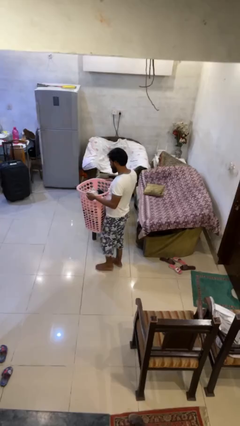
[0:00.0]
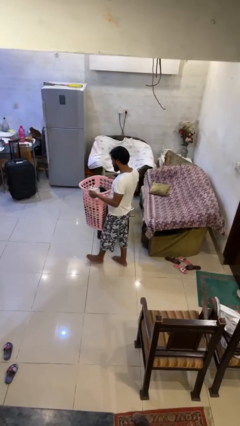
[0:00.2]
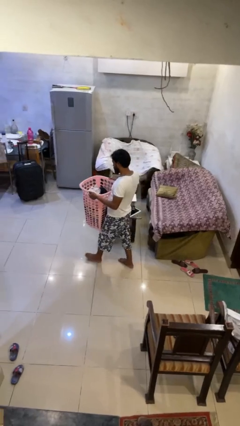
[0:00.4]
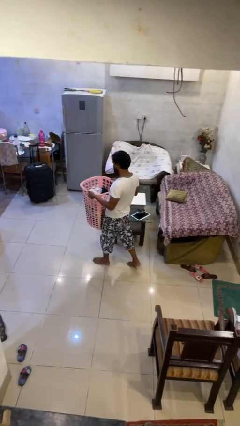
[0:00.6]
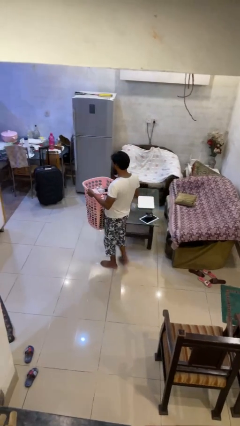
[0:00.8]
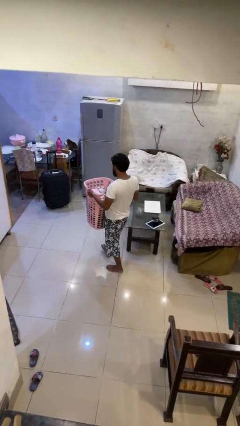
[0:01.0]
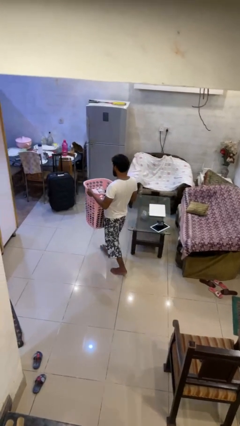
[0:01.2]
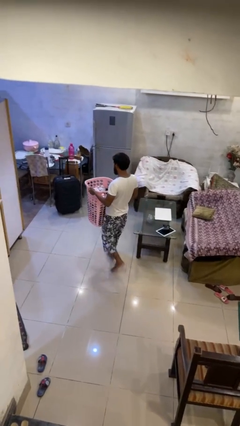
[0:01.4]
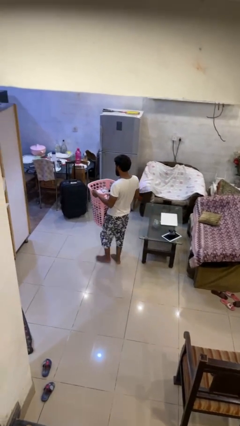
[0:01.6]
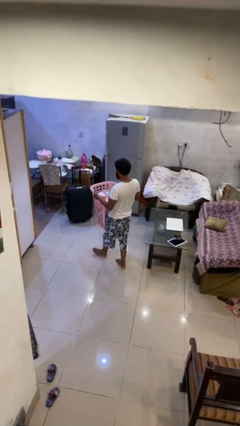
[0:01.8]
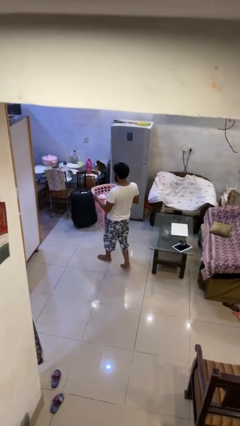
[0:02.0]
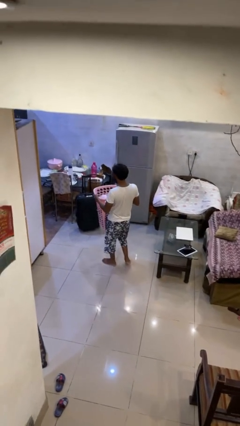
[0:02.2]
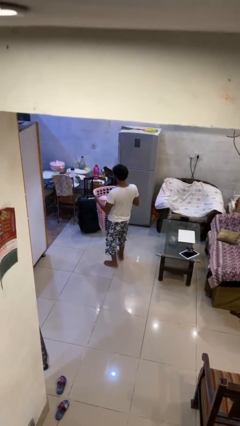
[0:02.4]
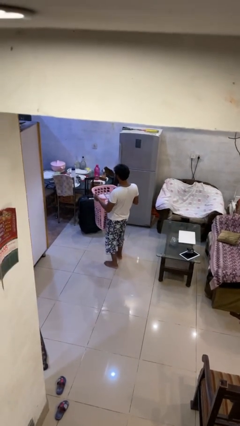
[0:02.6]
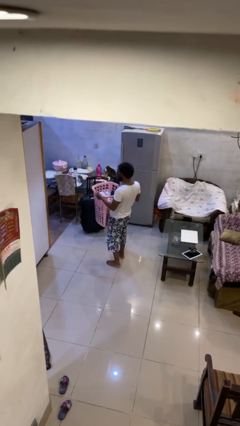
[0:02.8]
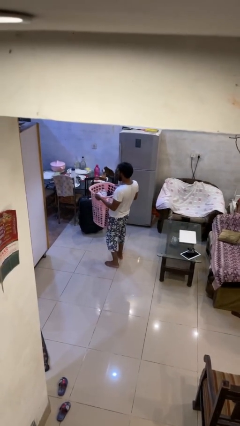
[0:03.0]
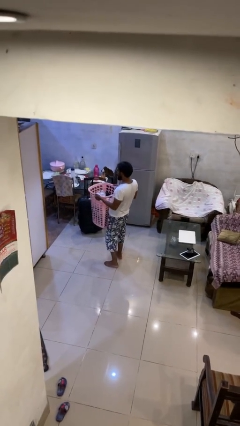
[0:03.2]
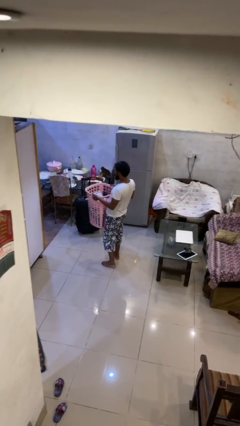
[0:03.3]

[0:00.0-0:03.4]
person carries laundry basket

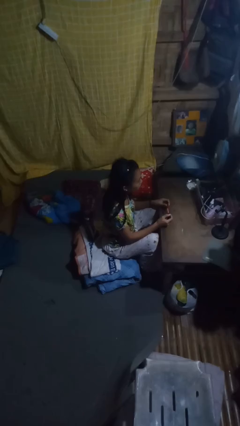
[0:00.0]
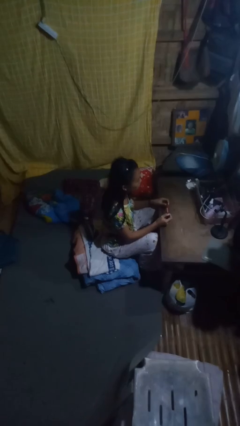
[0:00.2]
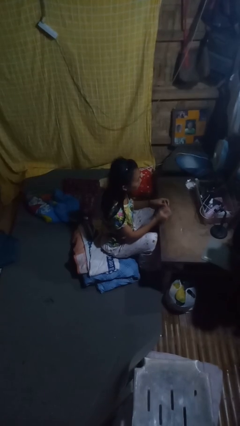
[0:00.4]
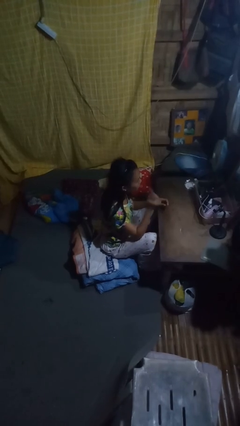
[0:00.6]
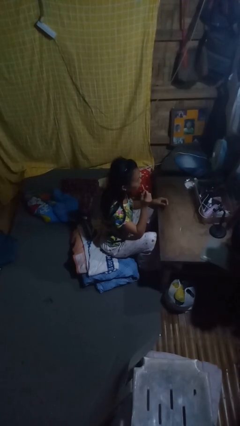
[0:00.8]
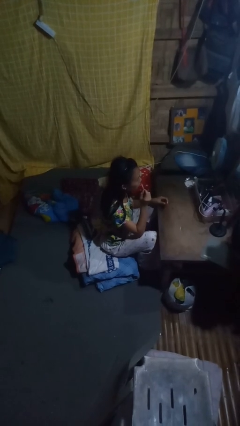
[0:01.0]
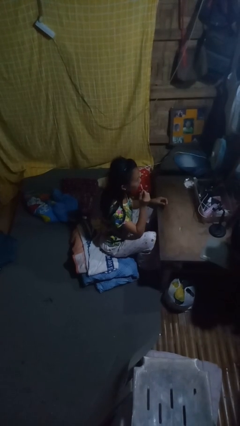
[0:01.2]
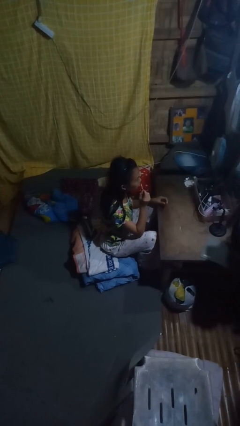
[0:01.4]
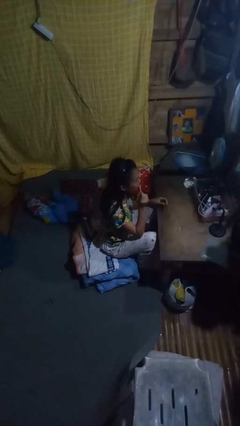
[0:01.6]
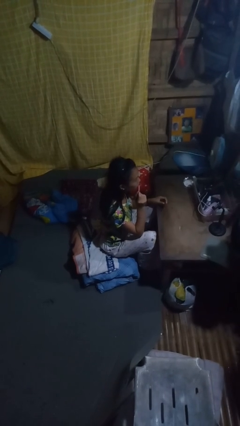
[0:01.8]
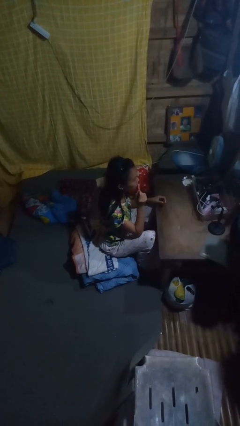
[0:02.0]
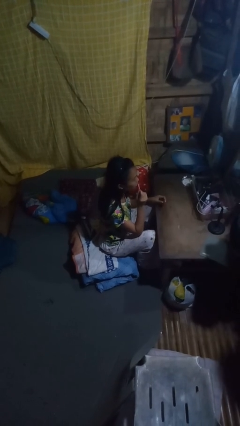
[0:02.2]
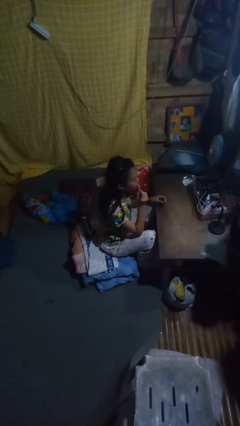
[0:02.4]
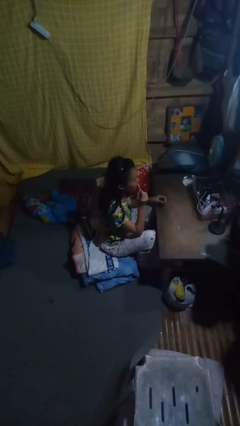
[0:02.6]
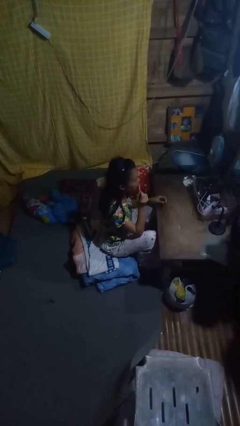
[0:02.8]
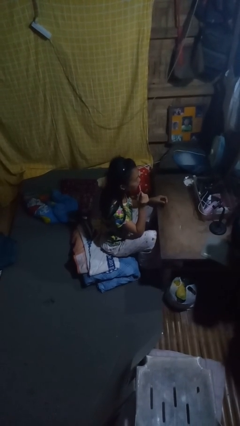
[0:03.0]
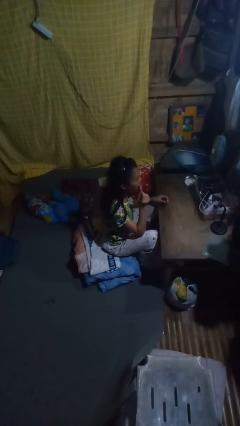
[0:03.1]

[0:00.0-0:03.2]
person applies lip makeup

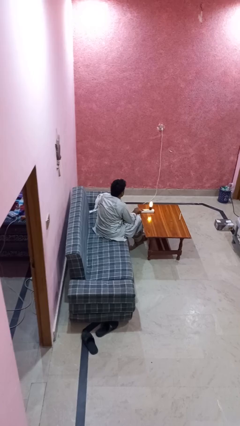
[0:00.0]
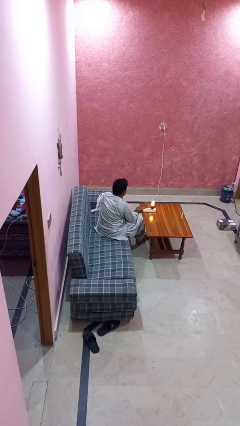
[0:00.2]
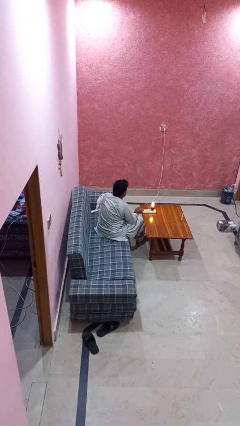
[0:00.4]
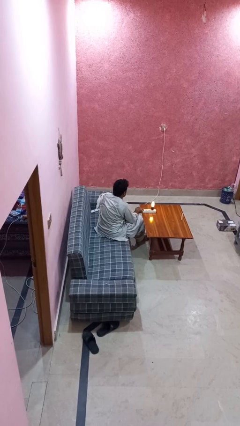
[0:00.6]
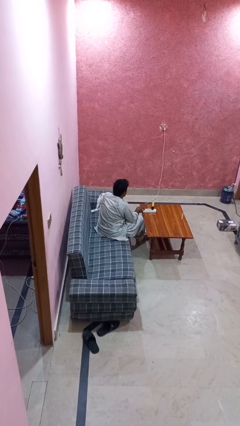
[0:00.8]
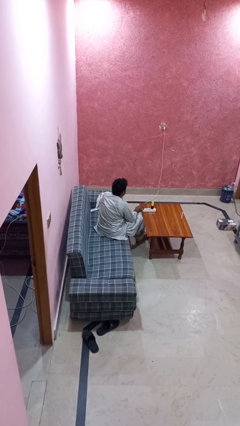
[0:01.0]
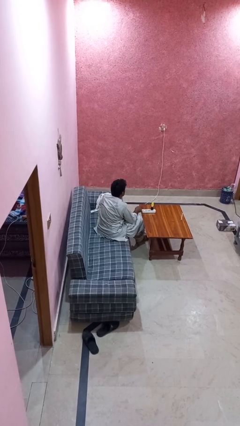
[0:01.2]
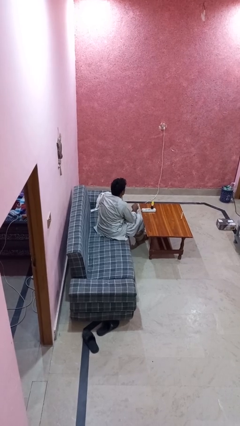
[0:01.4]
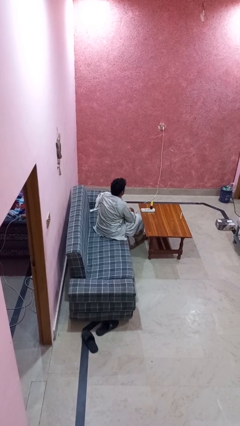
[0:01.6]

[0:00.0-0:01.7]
person turns off lamp

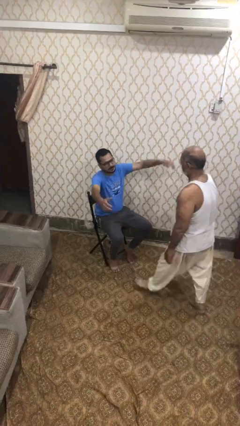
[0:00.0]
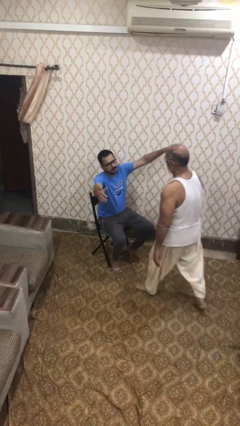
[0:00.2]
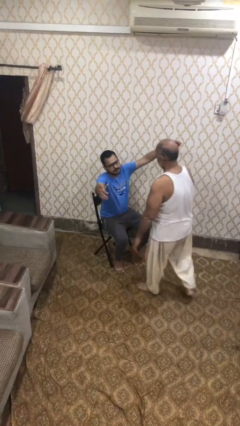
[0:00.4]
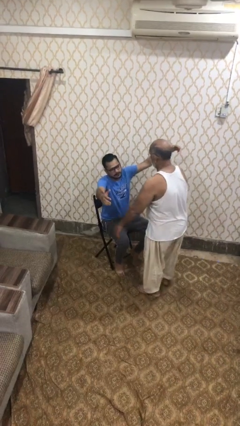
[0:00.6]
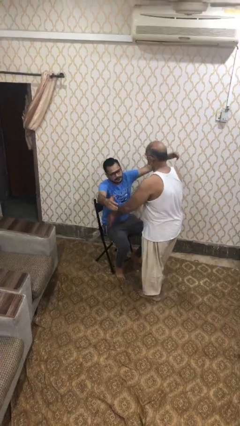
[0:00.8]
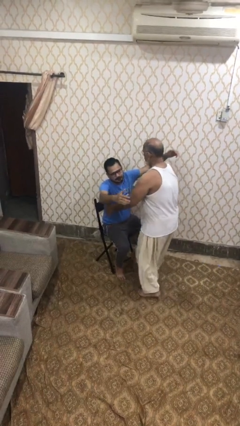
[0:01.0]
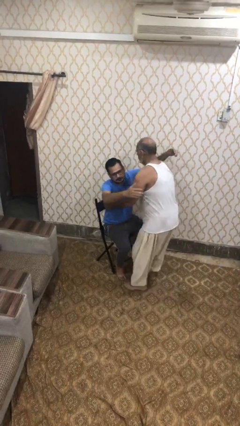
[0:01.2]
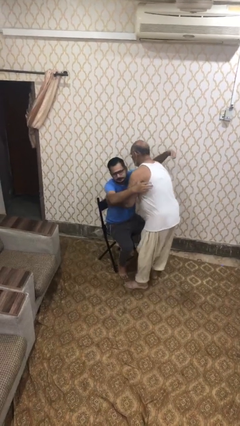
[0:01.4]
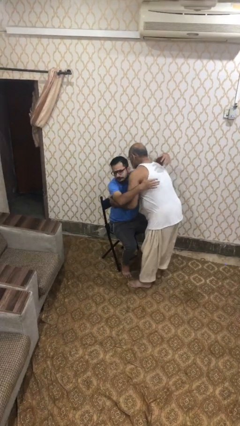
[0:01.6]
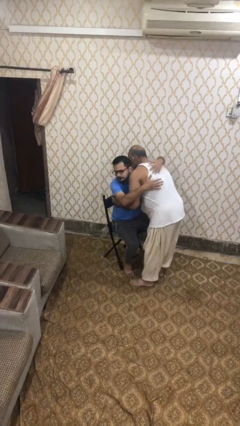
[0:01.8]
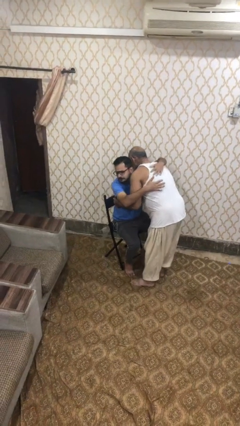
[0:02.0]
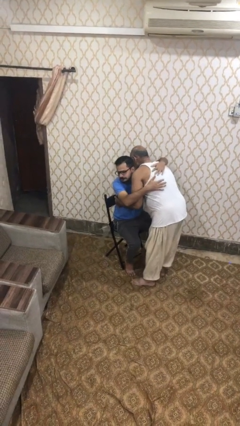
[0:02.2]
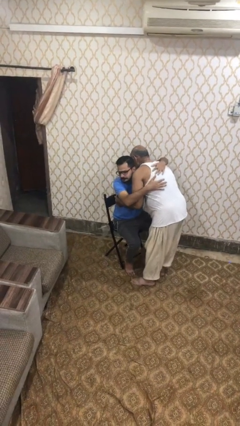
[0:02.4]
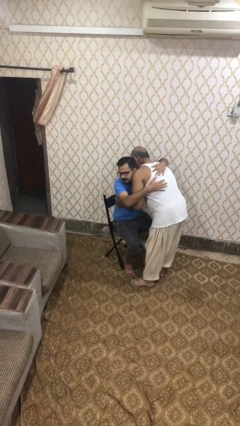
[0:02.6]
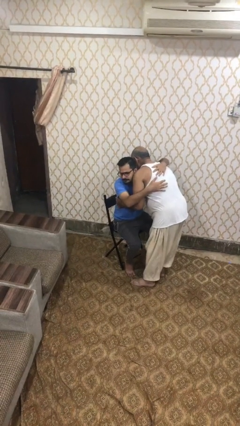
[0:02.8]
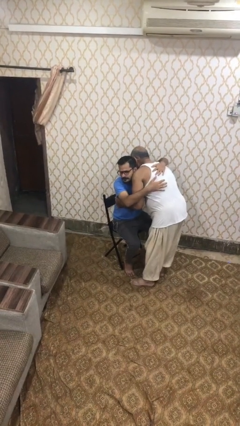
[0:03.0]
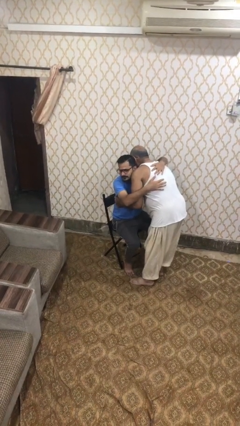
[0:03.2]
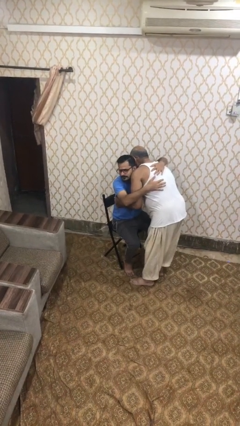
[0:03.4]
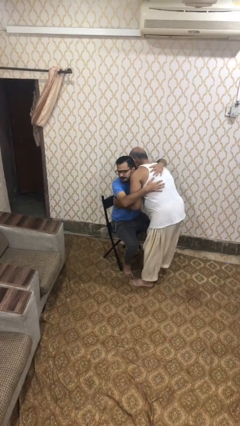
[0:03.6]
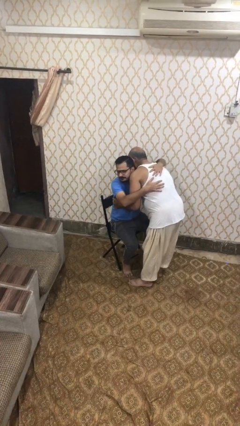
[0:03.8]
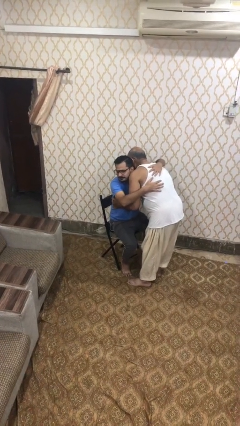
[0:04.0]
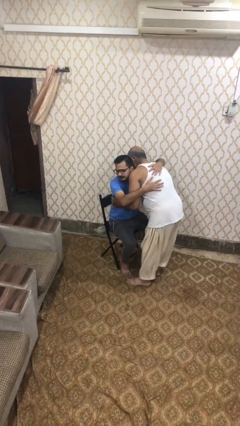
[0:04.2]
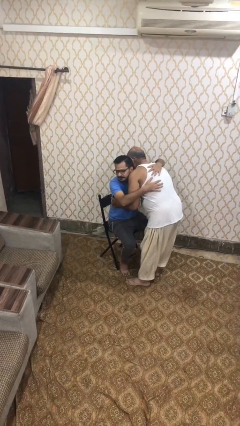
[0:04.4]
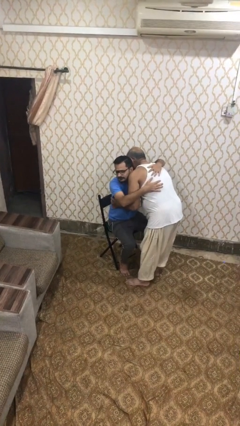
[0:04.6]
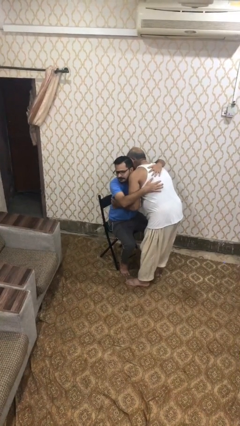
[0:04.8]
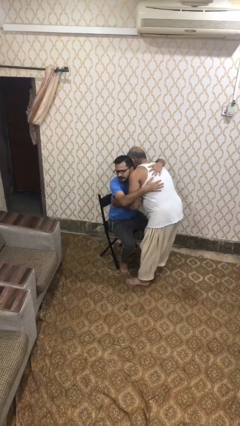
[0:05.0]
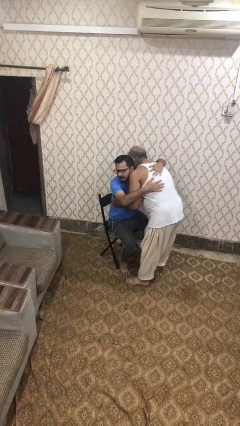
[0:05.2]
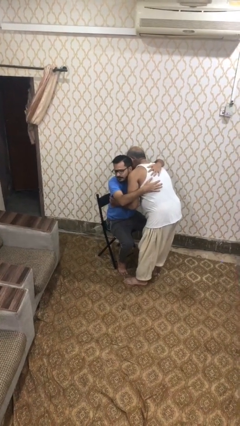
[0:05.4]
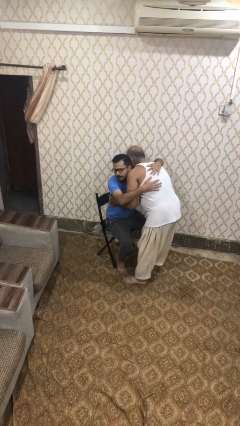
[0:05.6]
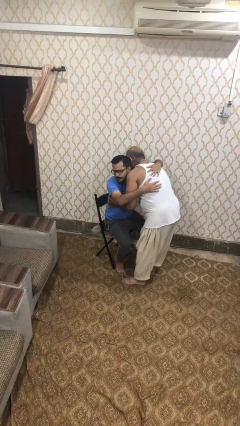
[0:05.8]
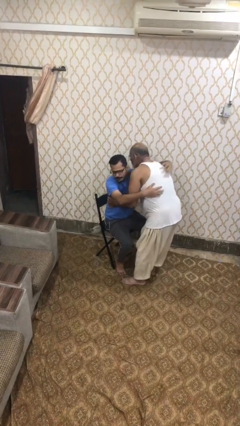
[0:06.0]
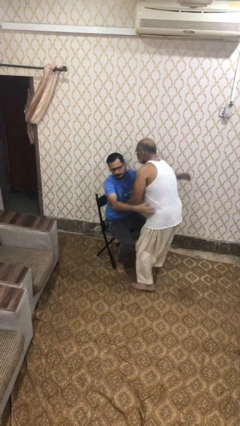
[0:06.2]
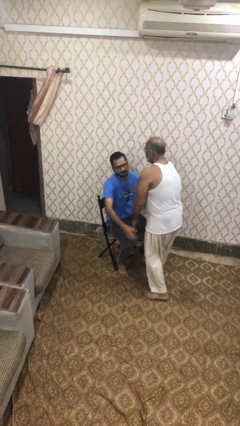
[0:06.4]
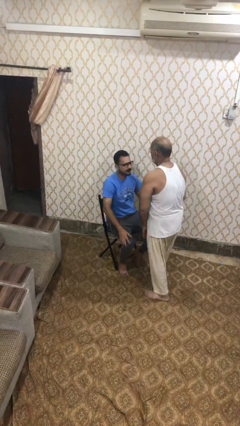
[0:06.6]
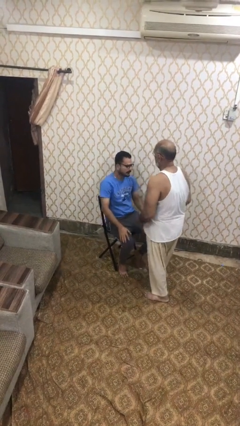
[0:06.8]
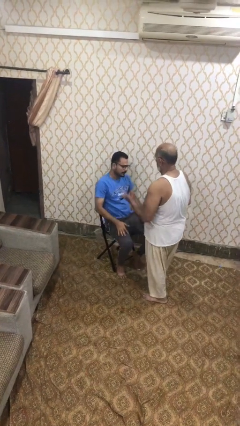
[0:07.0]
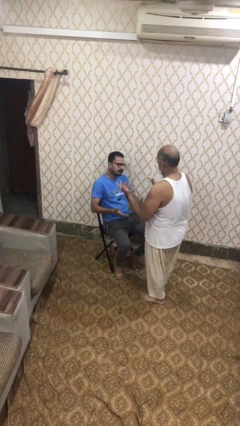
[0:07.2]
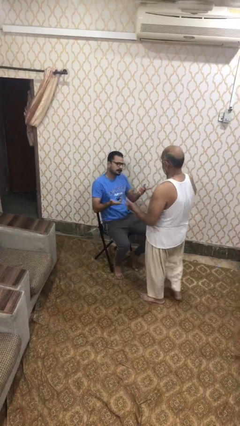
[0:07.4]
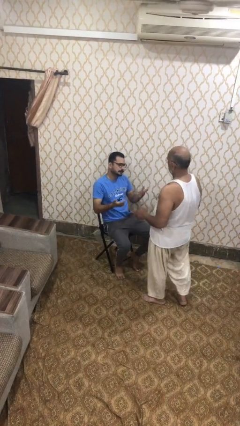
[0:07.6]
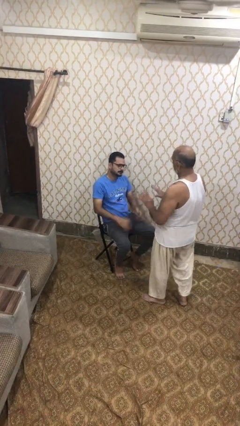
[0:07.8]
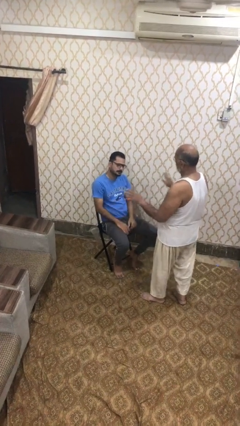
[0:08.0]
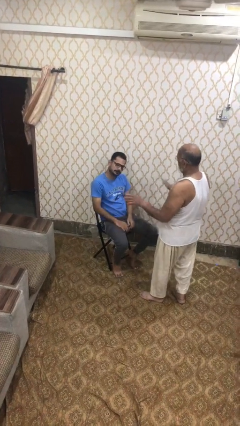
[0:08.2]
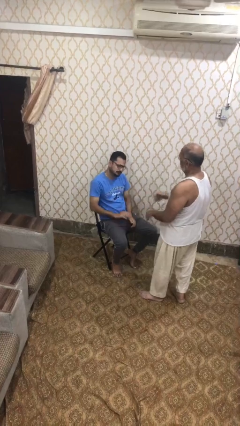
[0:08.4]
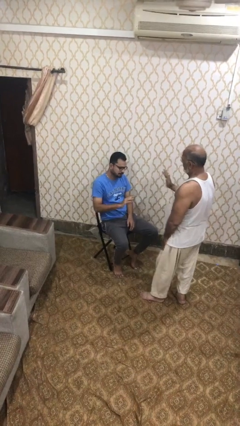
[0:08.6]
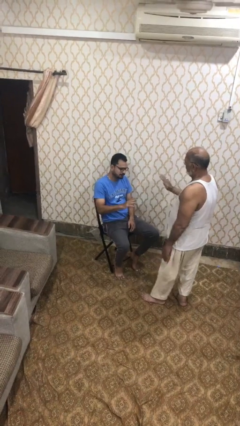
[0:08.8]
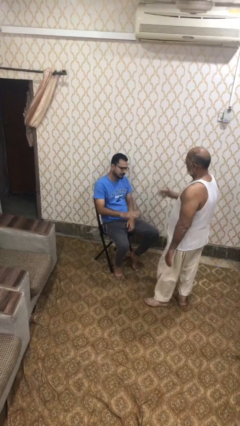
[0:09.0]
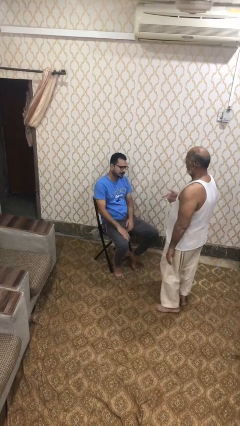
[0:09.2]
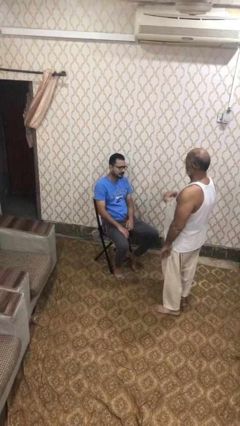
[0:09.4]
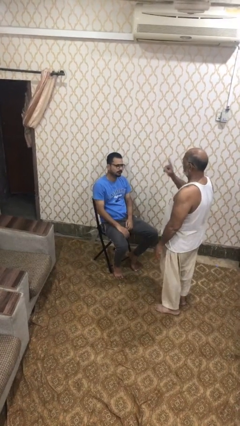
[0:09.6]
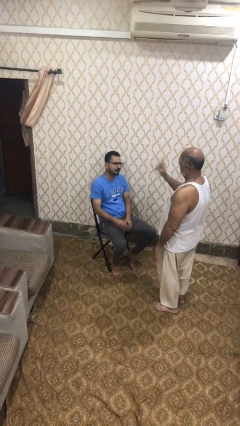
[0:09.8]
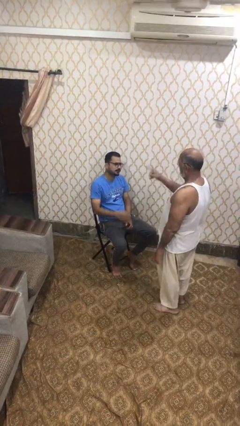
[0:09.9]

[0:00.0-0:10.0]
person embraces person
